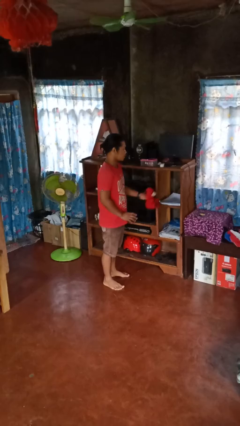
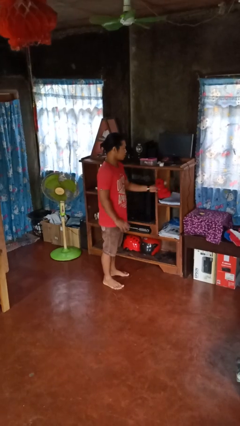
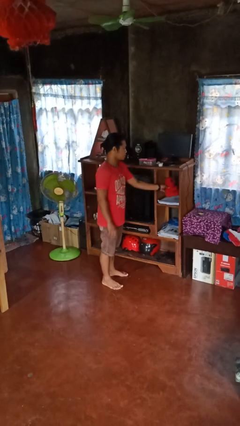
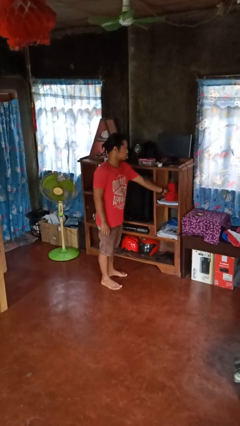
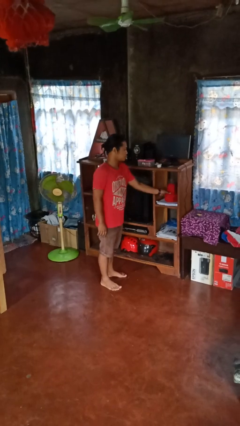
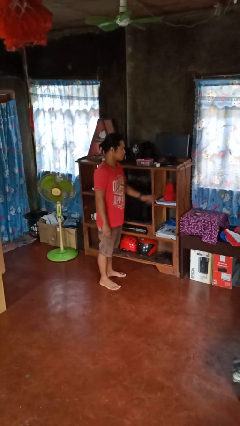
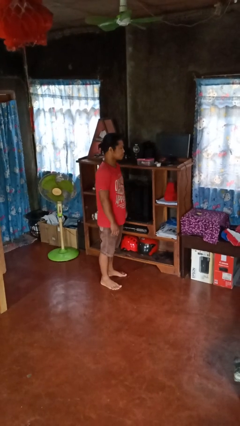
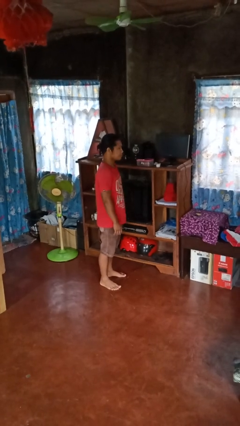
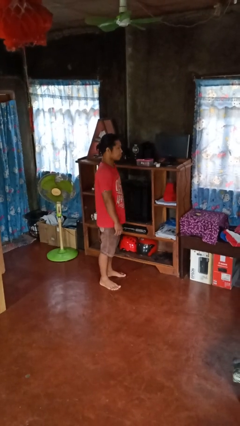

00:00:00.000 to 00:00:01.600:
person puts down object on shelf

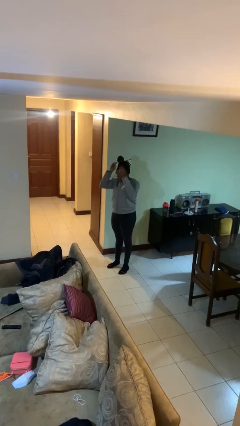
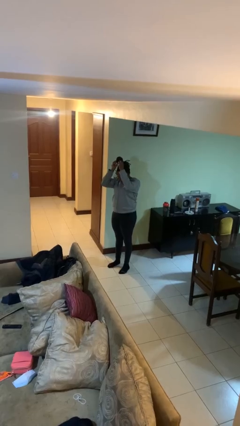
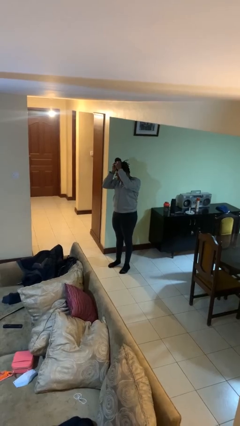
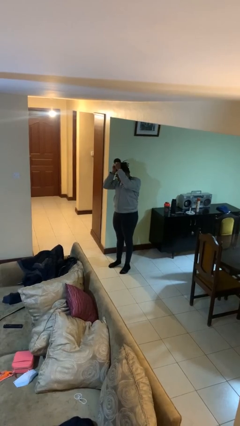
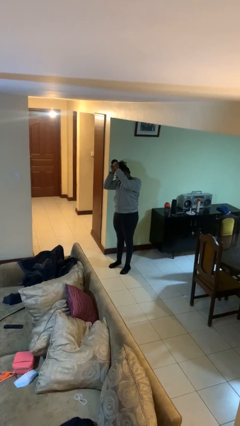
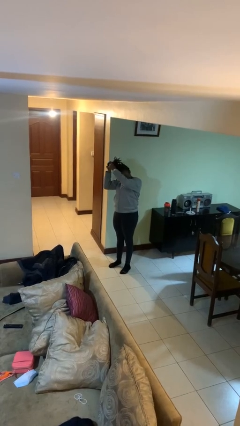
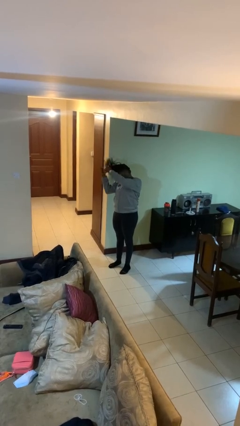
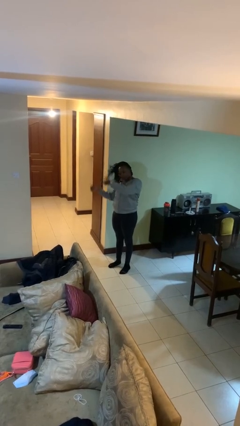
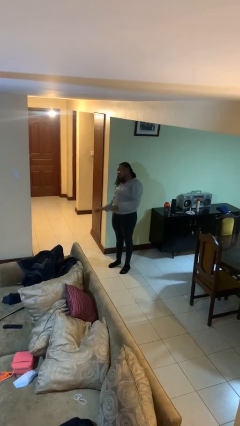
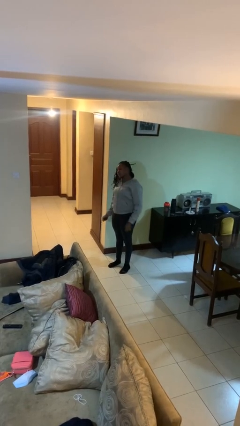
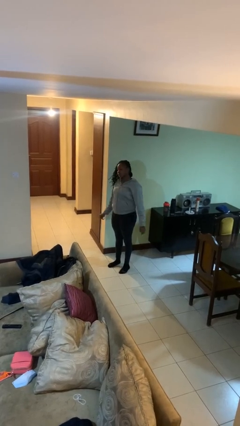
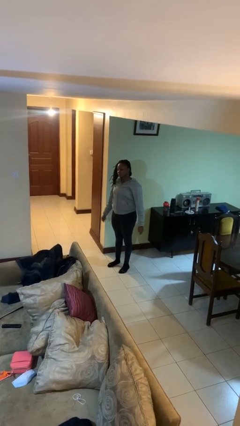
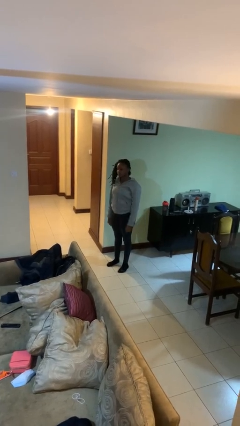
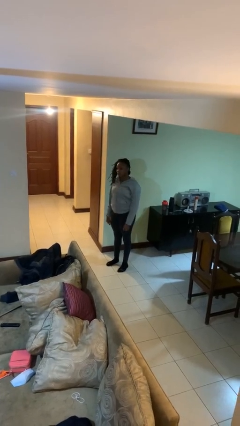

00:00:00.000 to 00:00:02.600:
person takes off hairtie

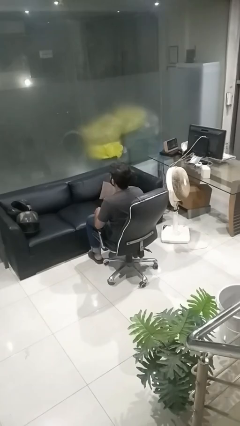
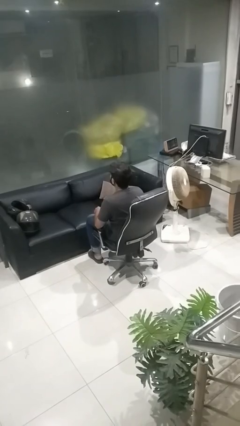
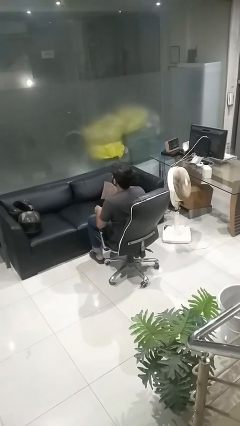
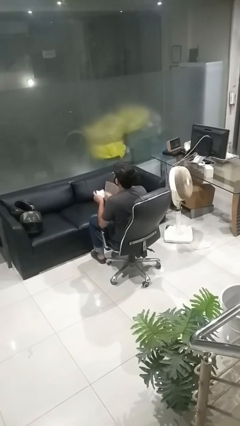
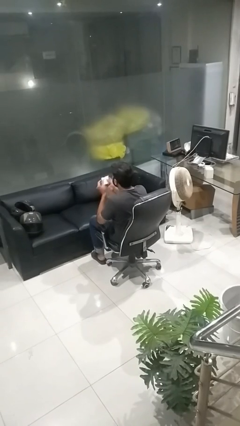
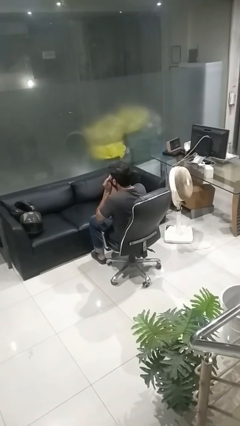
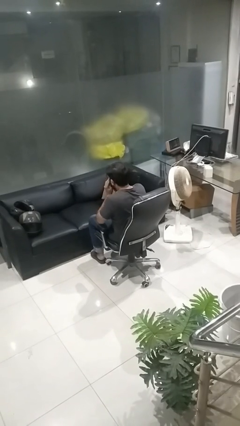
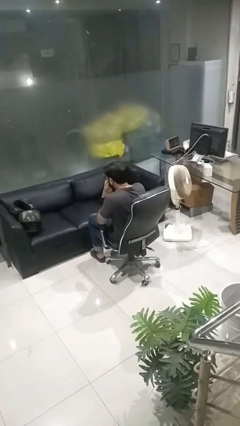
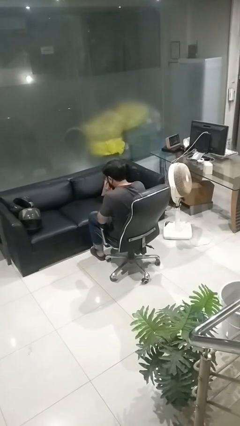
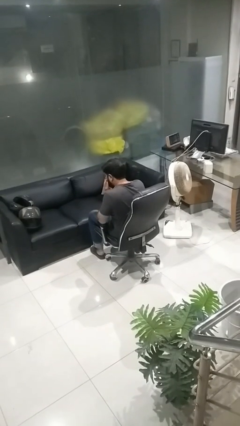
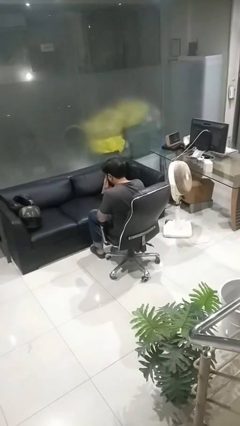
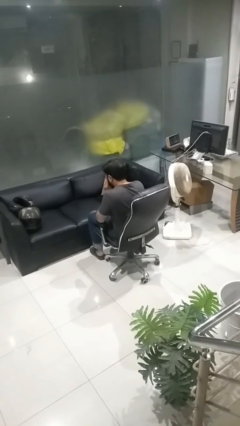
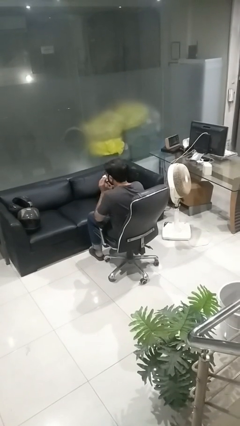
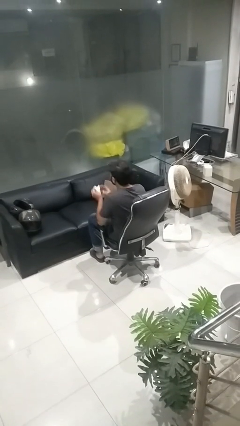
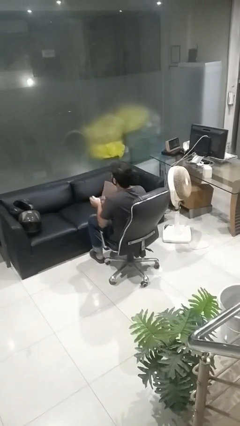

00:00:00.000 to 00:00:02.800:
person blows nose

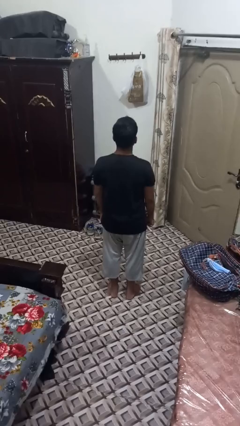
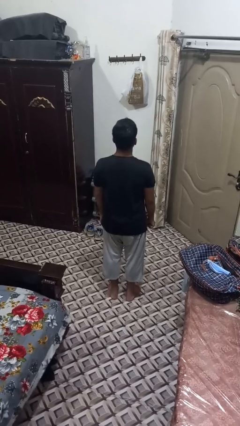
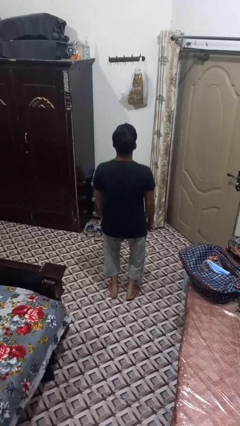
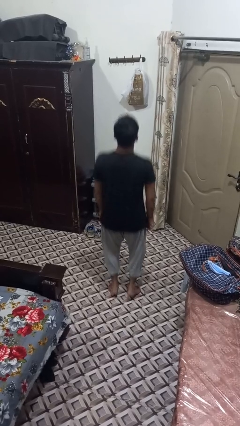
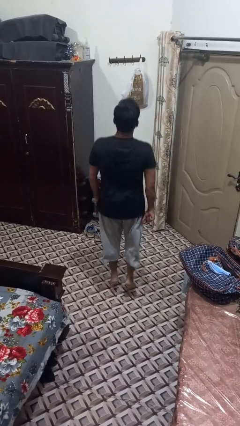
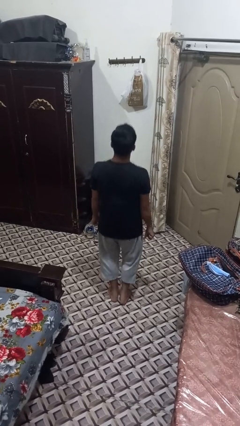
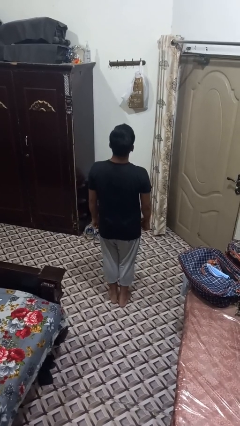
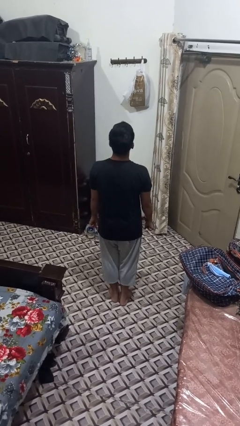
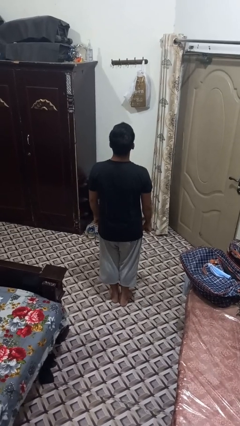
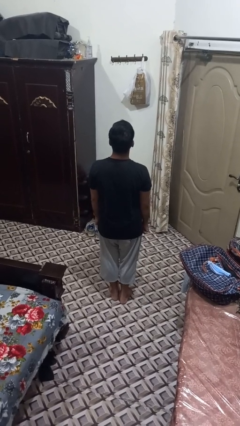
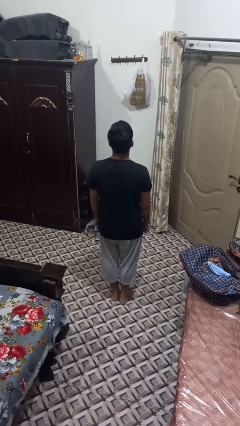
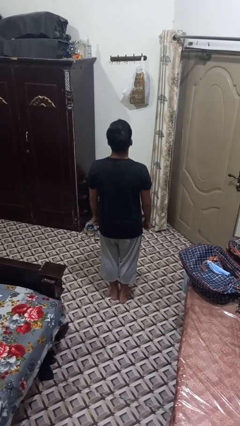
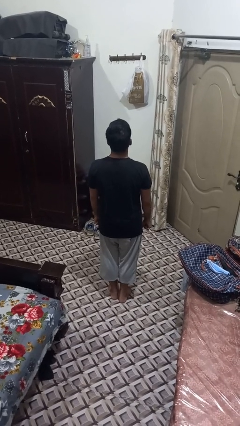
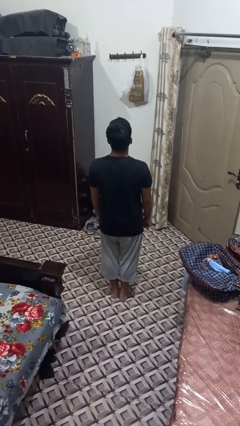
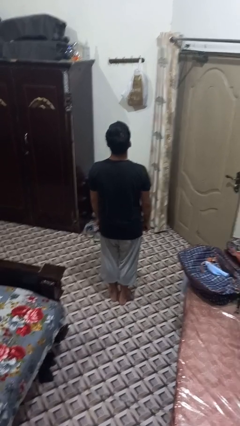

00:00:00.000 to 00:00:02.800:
person jumps

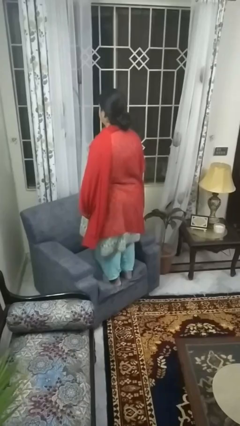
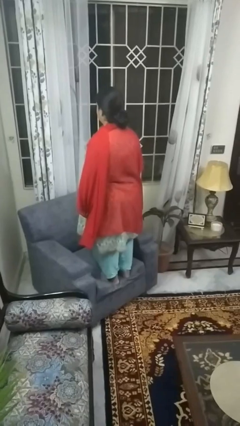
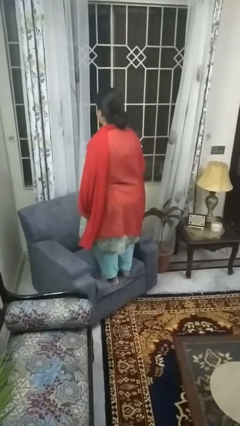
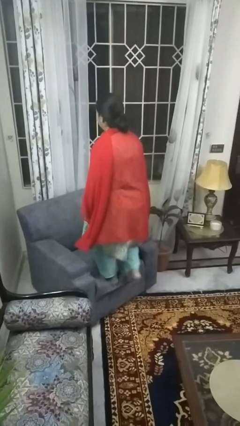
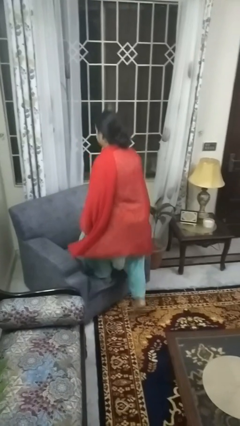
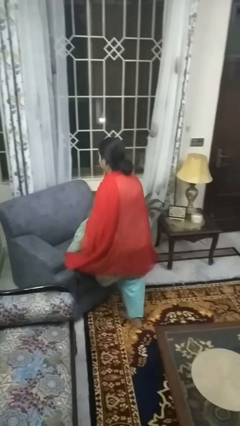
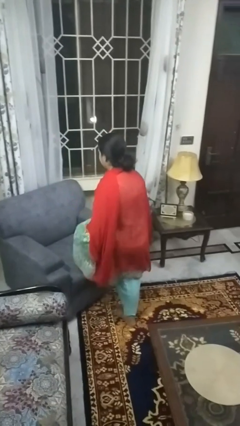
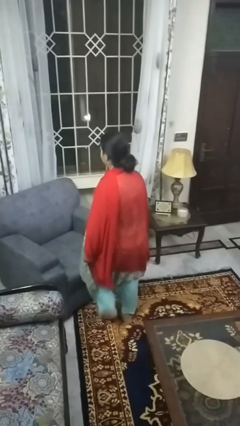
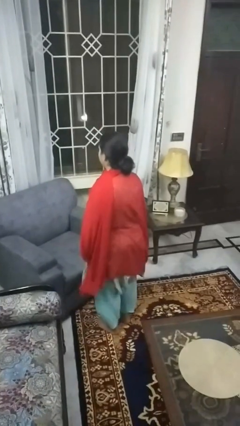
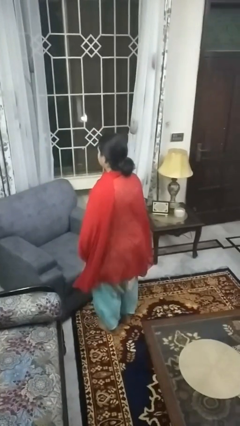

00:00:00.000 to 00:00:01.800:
person climbs off couch

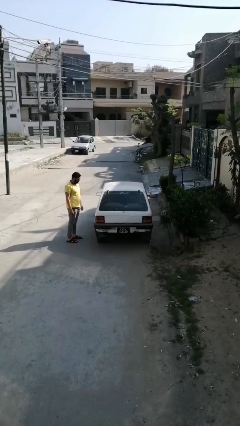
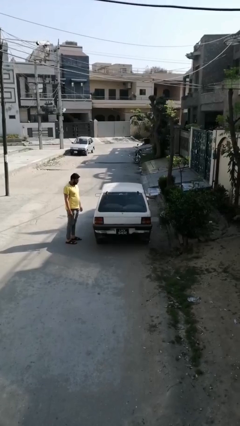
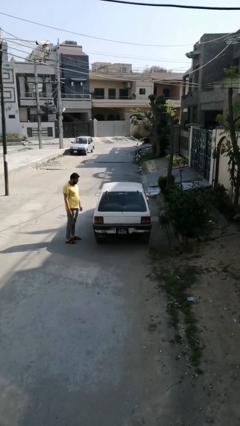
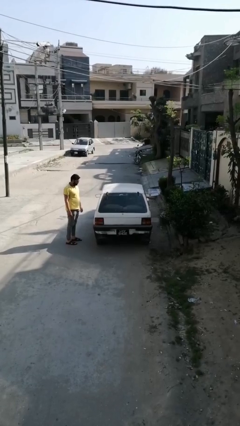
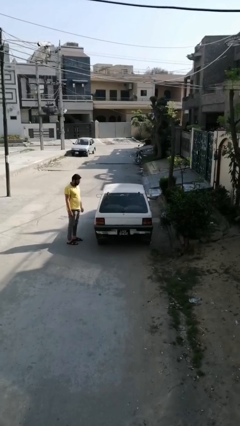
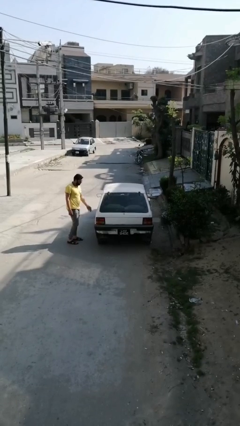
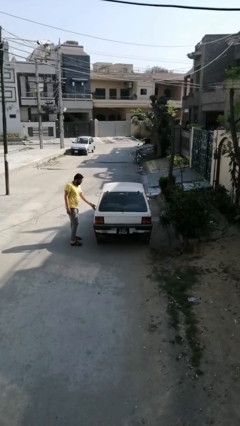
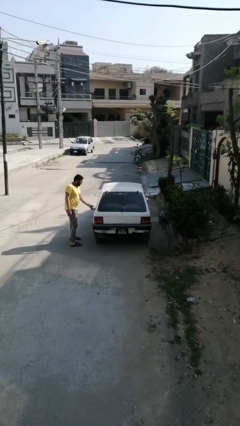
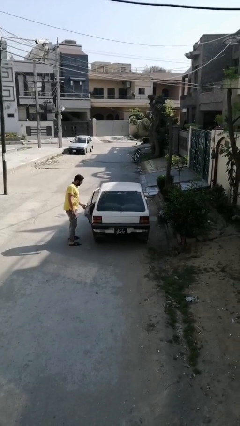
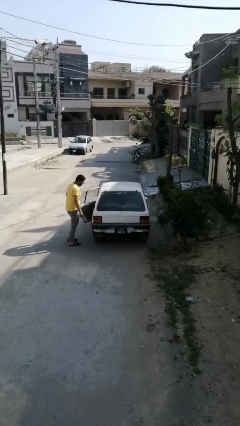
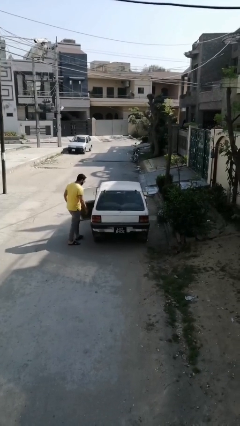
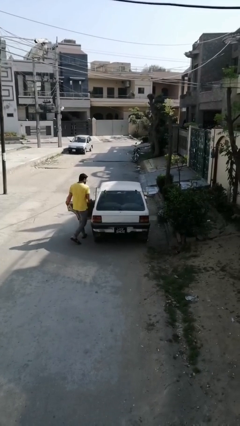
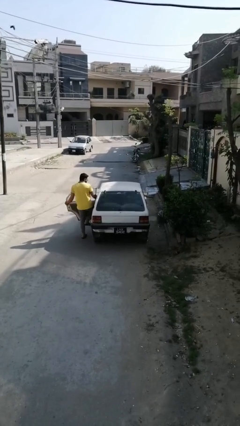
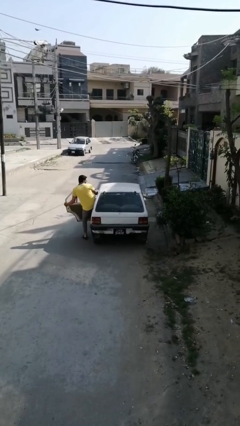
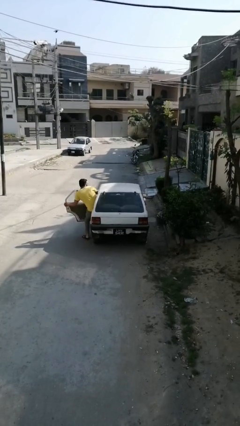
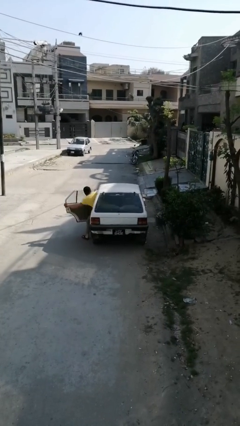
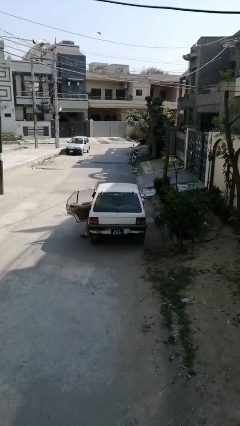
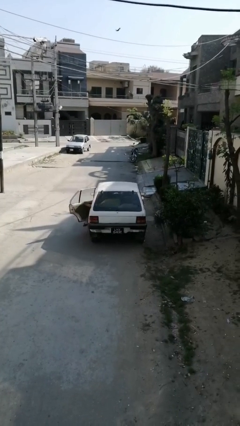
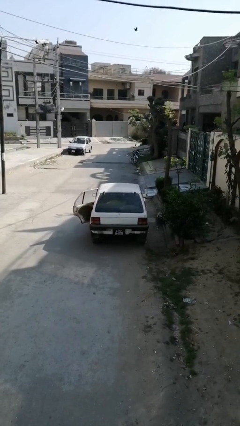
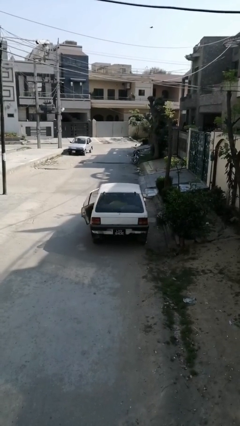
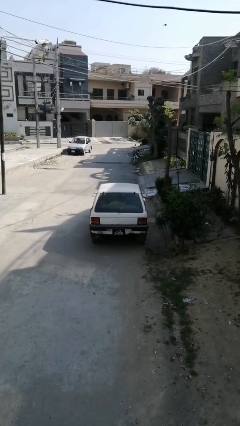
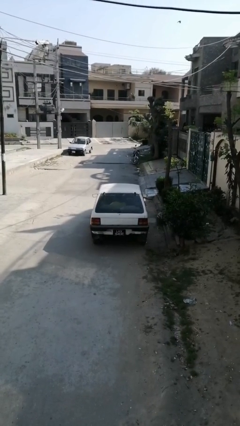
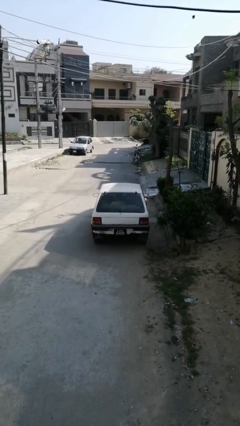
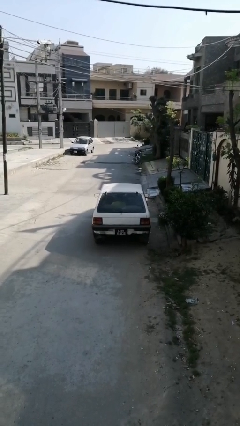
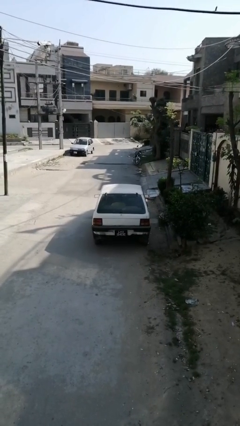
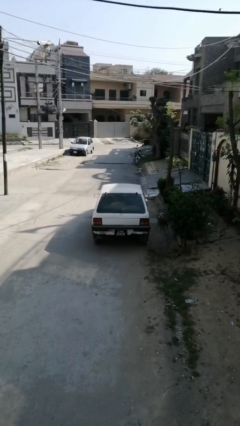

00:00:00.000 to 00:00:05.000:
car picks up person

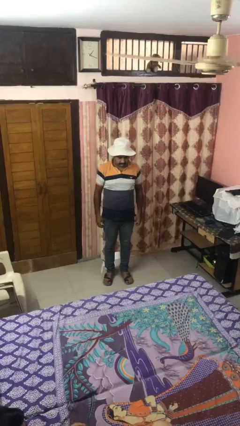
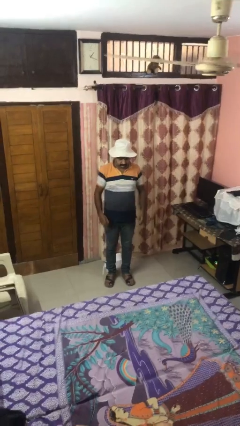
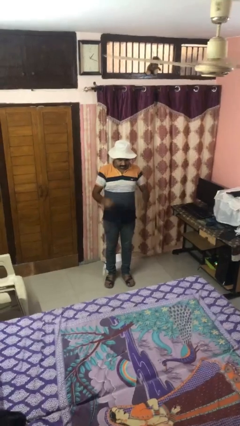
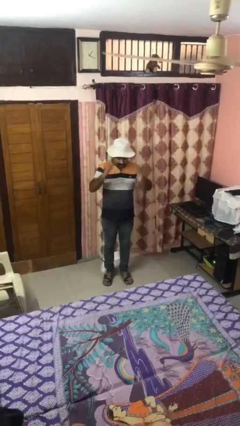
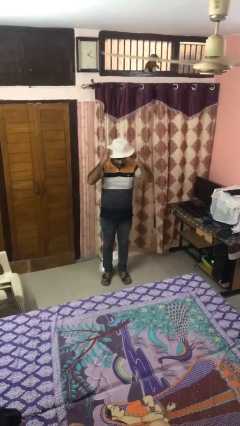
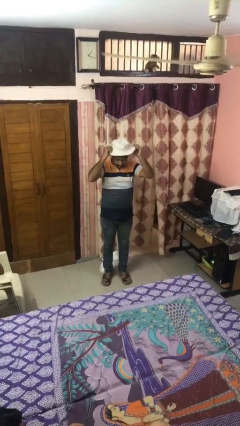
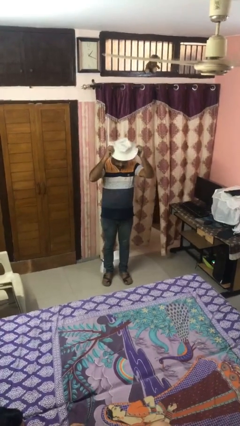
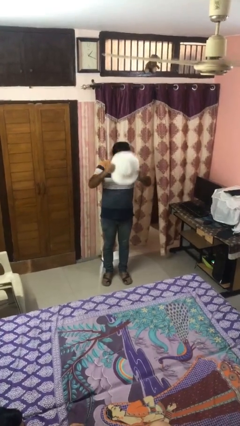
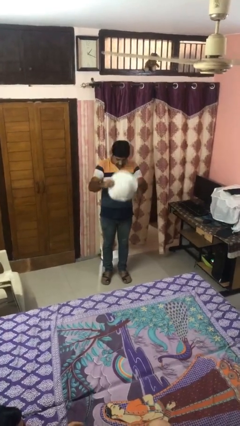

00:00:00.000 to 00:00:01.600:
person takes off hat
